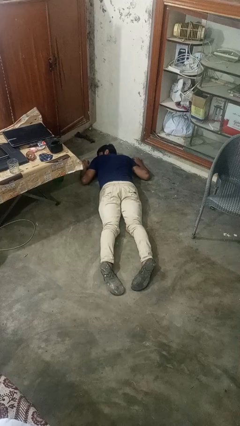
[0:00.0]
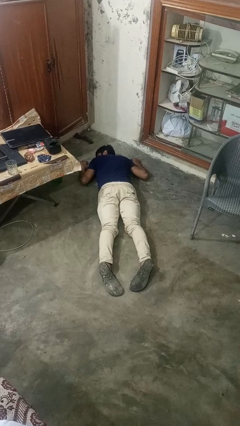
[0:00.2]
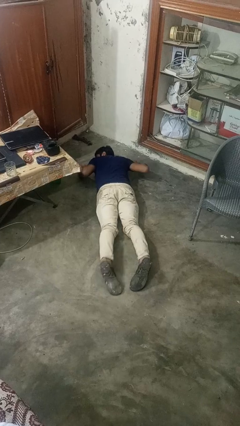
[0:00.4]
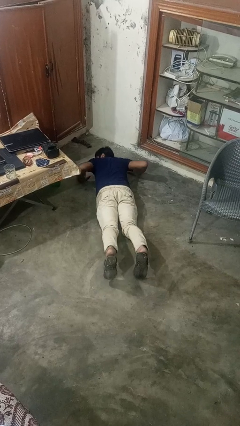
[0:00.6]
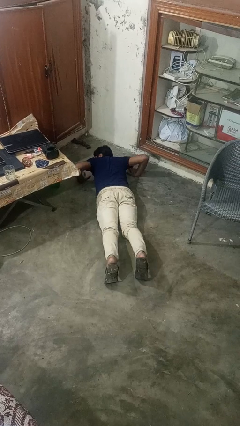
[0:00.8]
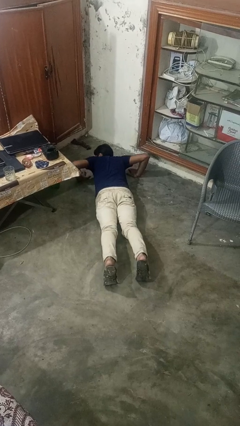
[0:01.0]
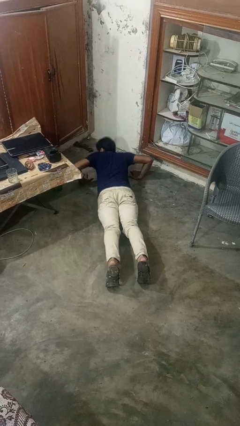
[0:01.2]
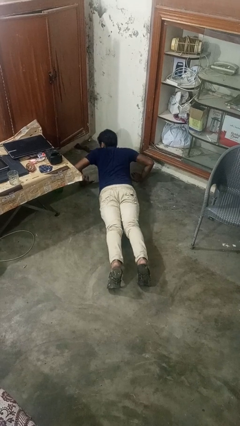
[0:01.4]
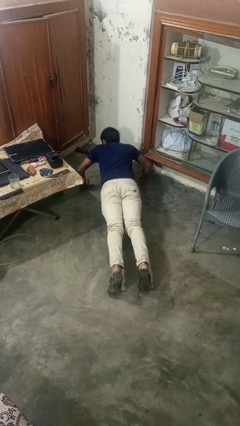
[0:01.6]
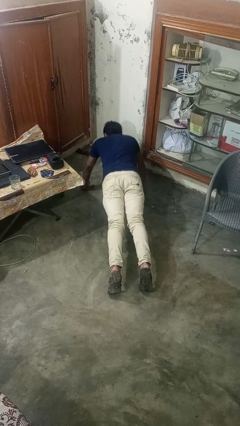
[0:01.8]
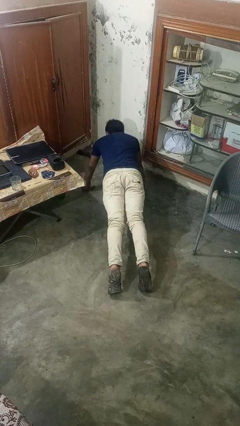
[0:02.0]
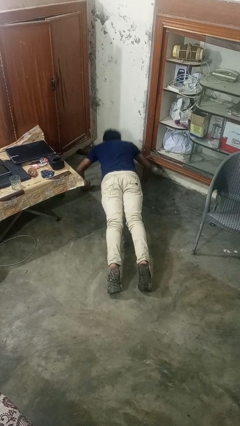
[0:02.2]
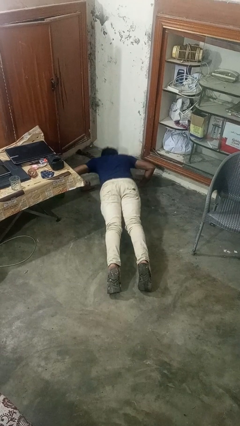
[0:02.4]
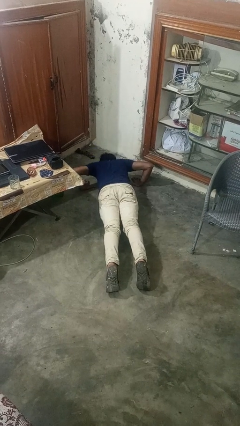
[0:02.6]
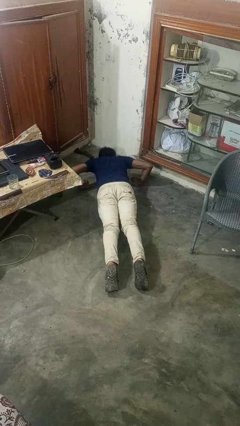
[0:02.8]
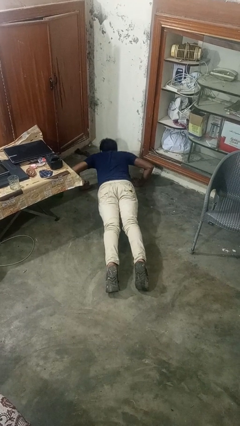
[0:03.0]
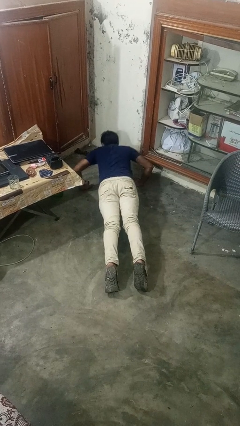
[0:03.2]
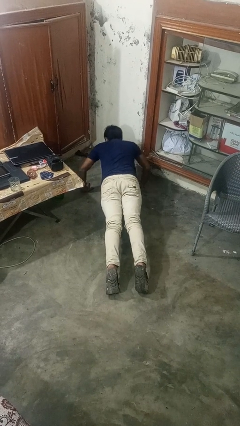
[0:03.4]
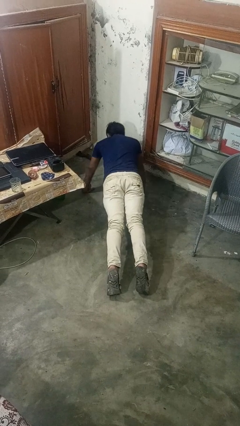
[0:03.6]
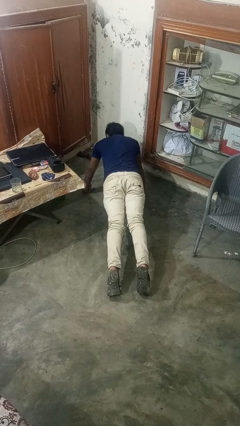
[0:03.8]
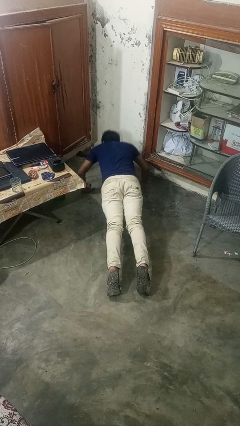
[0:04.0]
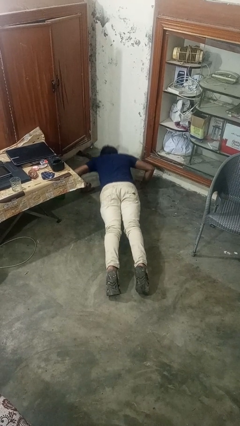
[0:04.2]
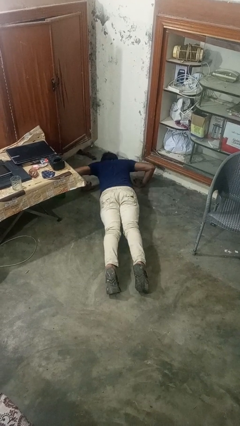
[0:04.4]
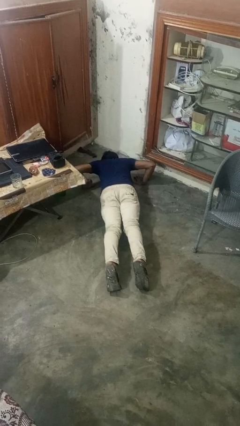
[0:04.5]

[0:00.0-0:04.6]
person exercises with pushup

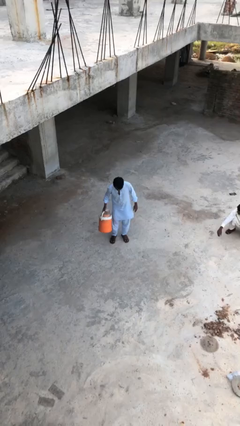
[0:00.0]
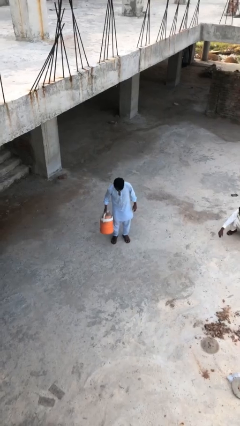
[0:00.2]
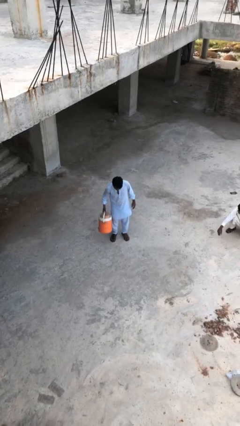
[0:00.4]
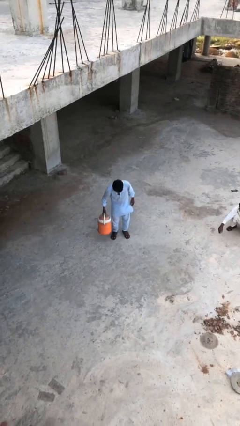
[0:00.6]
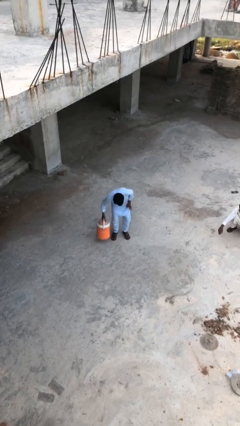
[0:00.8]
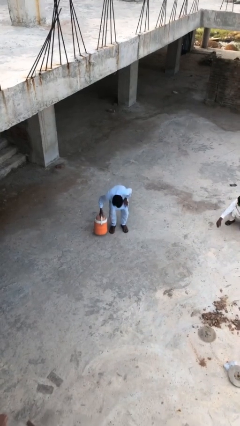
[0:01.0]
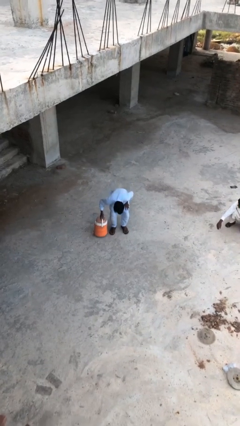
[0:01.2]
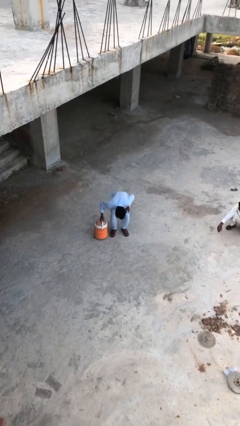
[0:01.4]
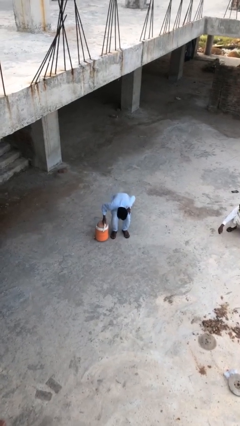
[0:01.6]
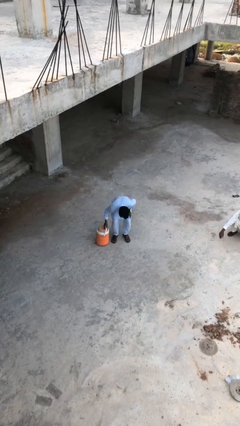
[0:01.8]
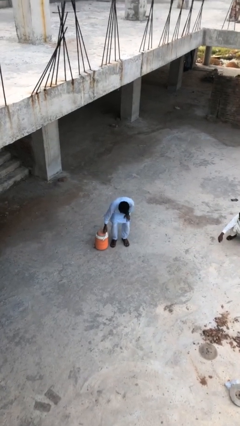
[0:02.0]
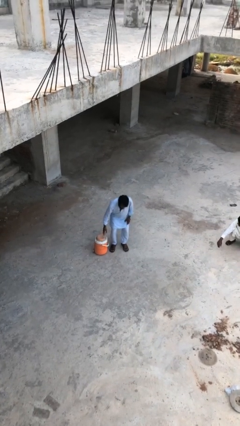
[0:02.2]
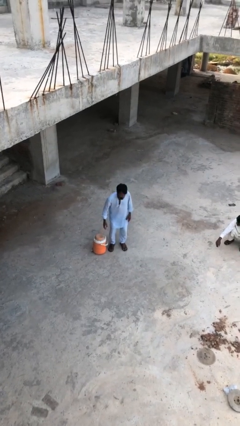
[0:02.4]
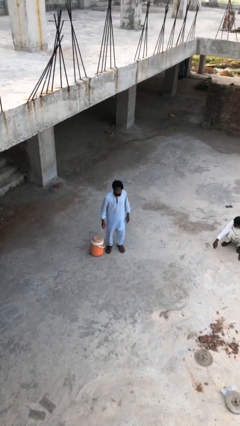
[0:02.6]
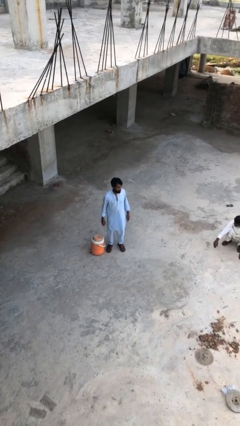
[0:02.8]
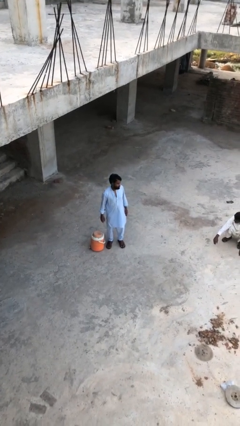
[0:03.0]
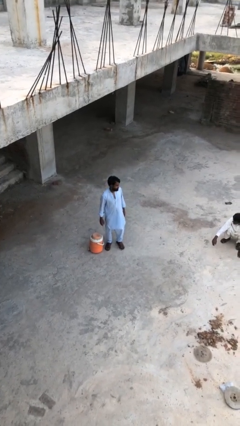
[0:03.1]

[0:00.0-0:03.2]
person puts down object on floor

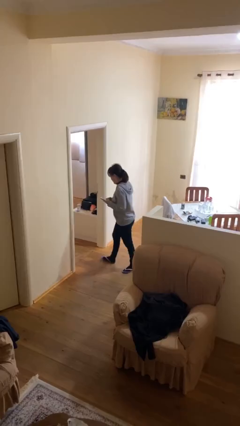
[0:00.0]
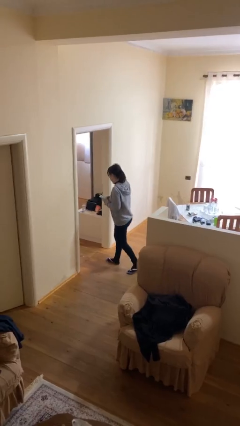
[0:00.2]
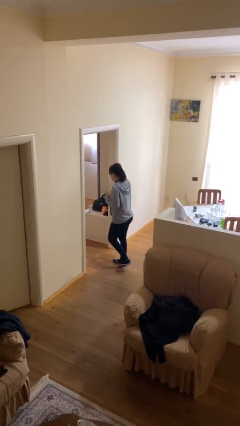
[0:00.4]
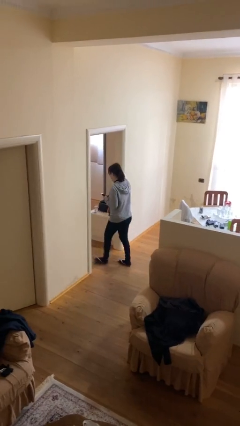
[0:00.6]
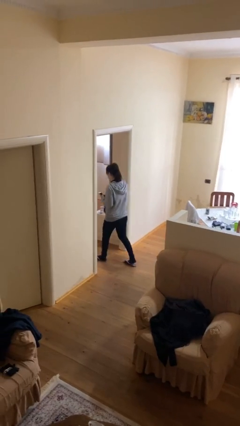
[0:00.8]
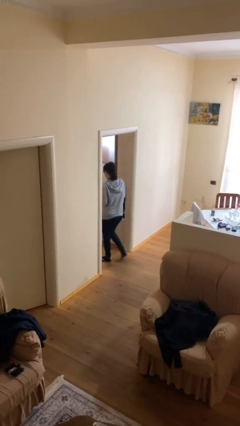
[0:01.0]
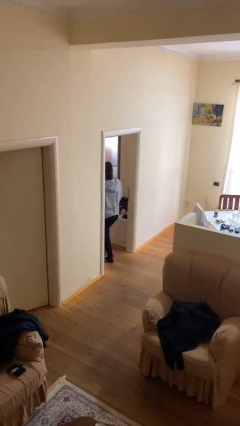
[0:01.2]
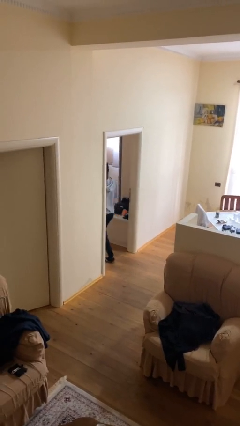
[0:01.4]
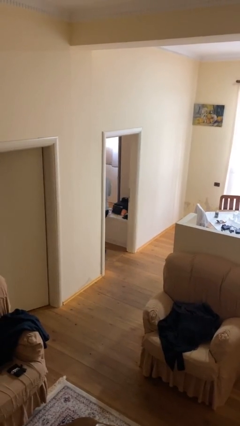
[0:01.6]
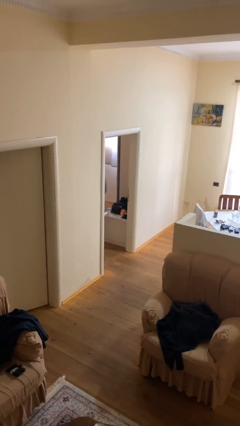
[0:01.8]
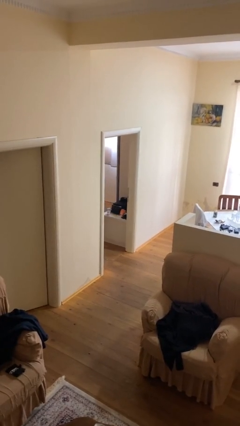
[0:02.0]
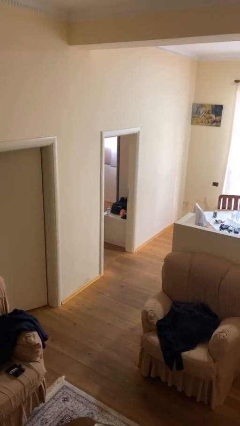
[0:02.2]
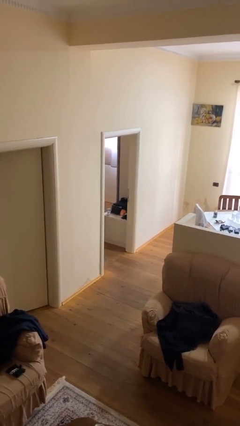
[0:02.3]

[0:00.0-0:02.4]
person exits scene through structure

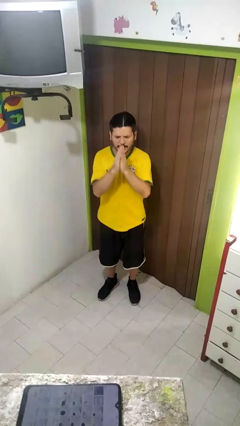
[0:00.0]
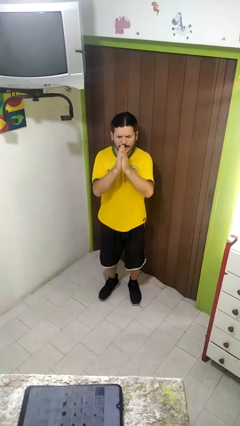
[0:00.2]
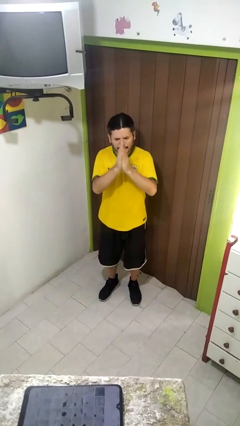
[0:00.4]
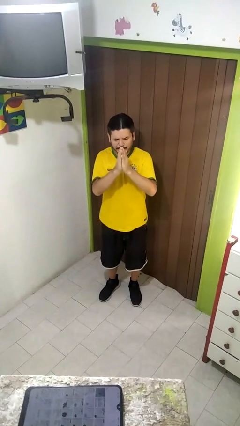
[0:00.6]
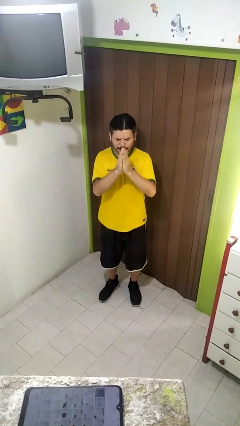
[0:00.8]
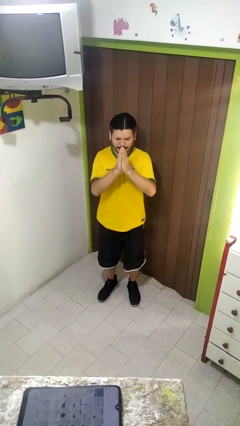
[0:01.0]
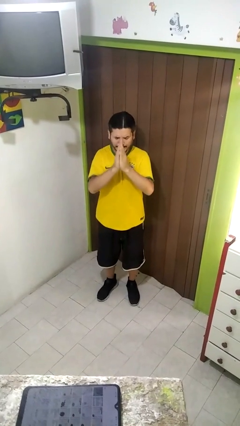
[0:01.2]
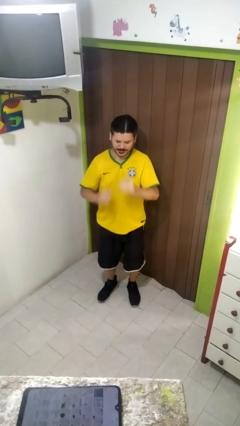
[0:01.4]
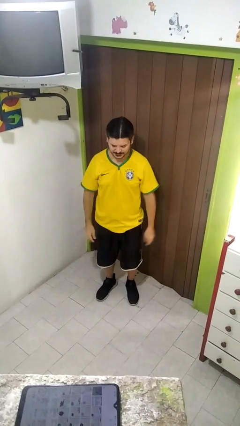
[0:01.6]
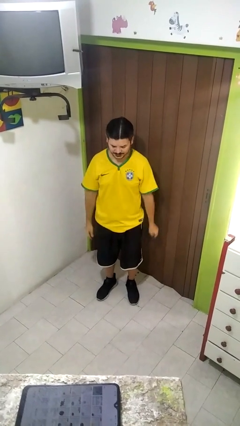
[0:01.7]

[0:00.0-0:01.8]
person blows into hands

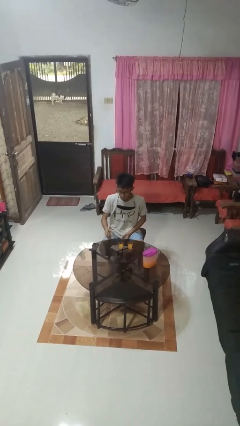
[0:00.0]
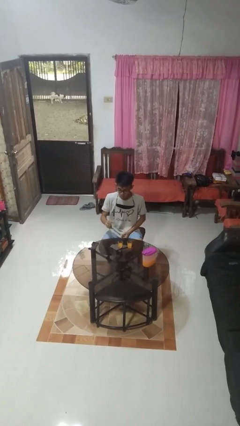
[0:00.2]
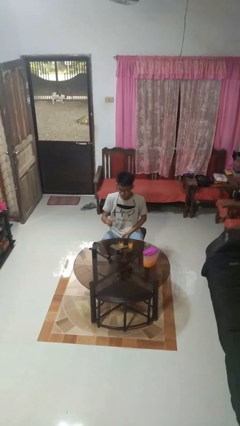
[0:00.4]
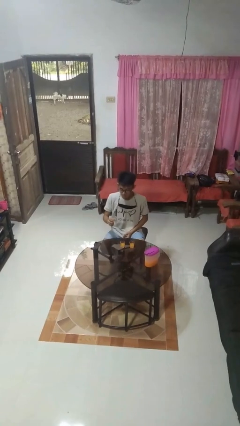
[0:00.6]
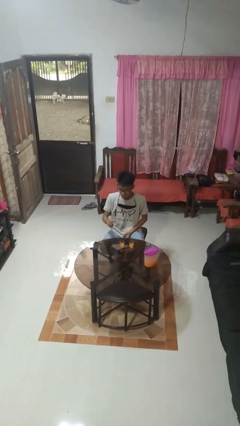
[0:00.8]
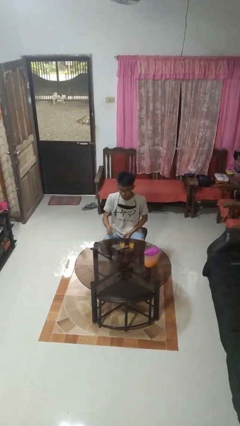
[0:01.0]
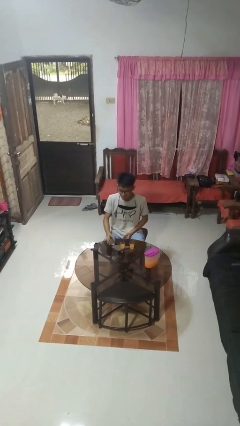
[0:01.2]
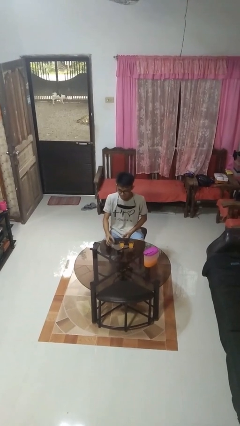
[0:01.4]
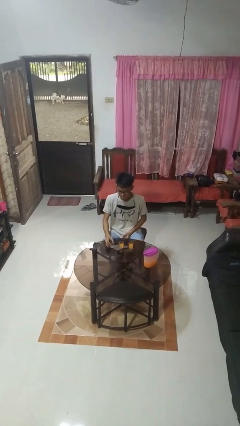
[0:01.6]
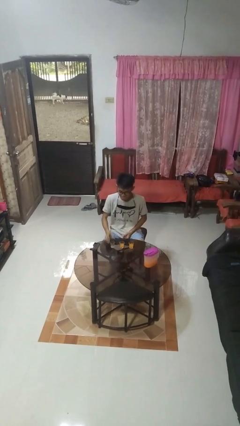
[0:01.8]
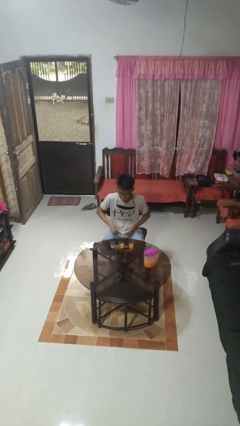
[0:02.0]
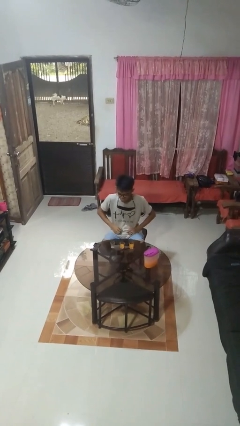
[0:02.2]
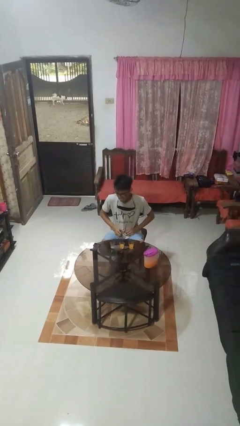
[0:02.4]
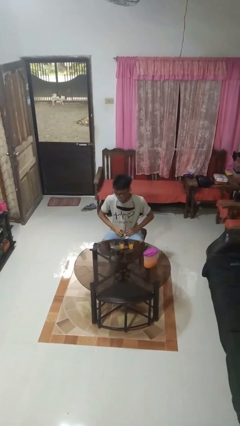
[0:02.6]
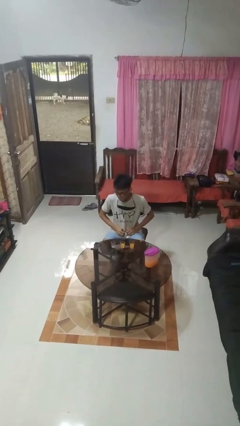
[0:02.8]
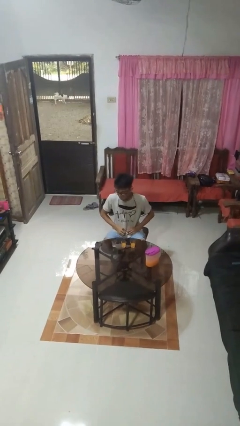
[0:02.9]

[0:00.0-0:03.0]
person puts down object on table

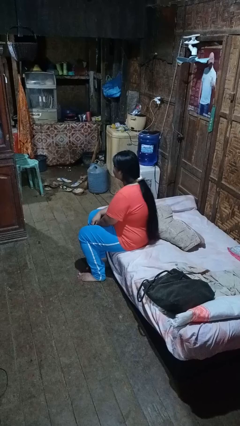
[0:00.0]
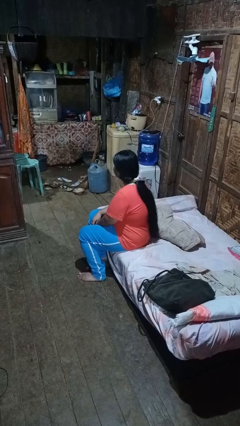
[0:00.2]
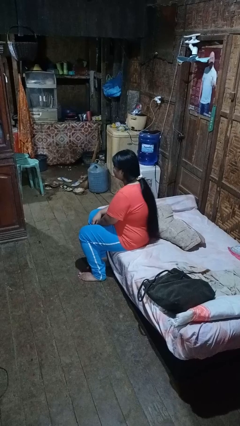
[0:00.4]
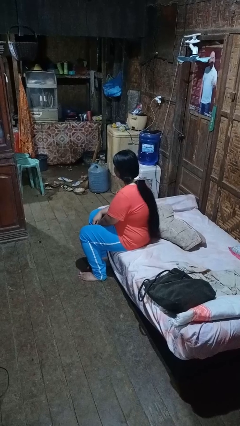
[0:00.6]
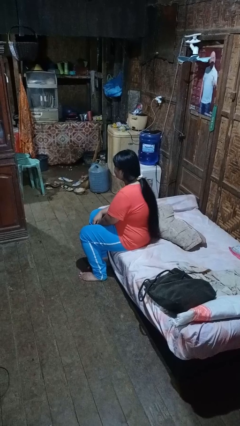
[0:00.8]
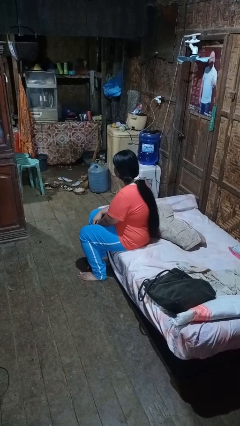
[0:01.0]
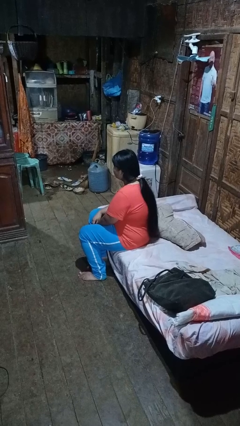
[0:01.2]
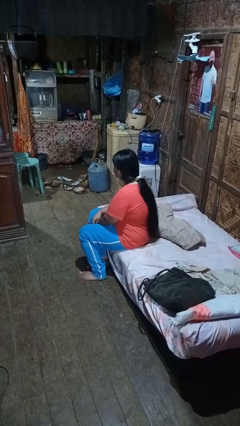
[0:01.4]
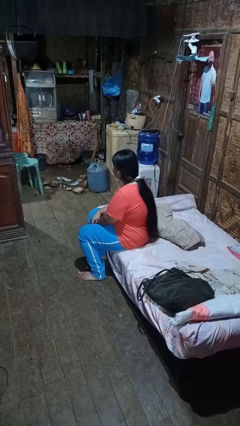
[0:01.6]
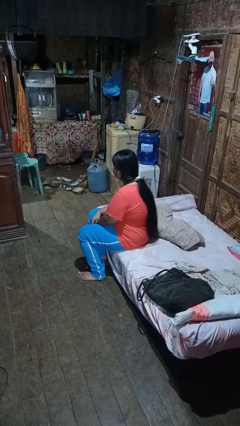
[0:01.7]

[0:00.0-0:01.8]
person shakes head

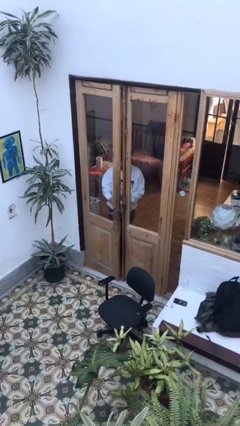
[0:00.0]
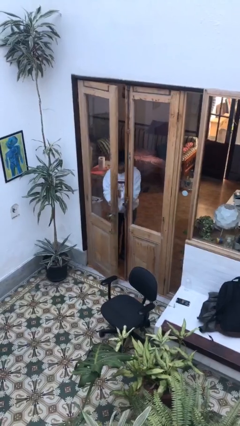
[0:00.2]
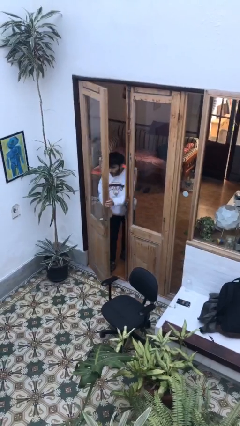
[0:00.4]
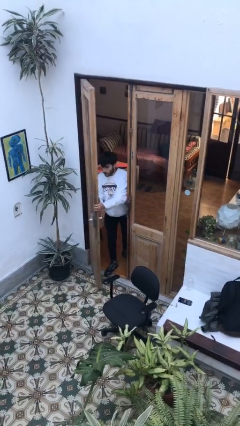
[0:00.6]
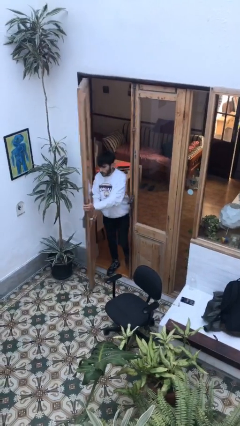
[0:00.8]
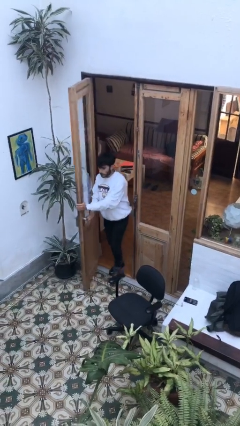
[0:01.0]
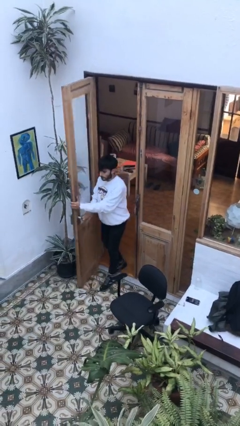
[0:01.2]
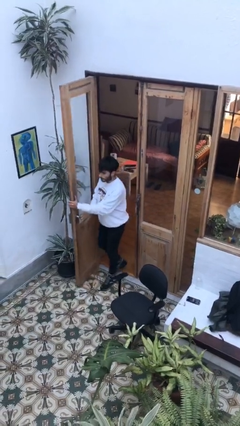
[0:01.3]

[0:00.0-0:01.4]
person opens facility door
